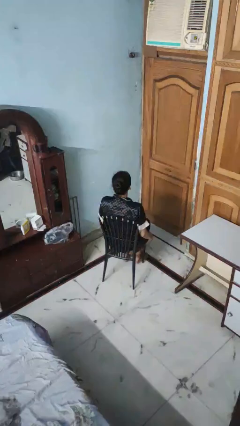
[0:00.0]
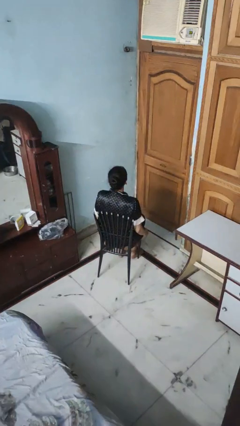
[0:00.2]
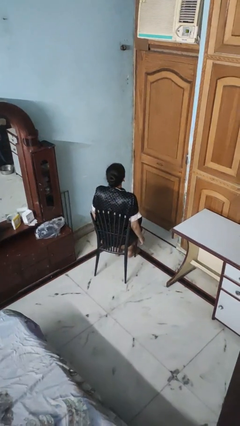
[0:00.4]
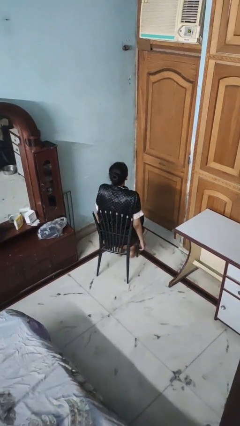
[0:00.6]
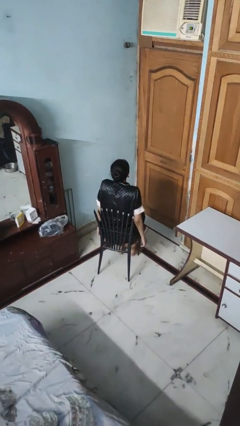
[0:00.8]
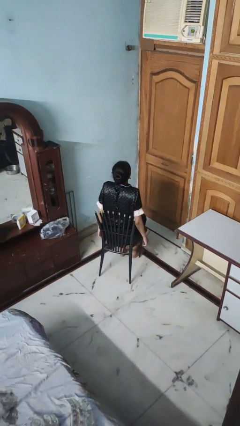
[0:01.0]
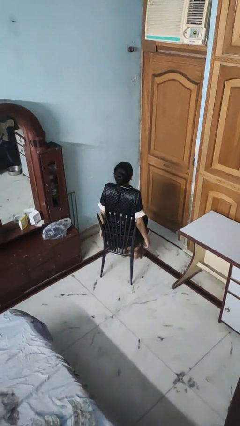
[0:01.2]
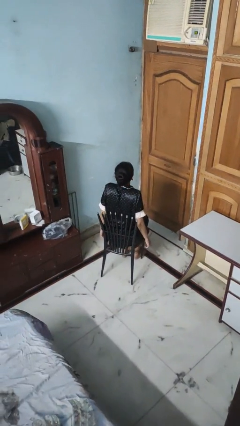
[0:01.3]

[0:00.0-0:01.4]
person shrugs

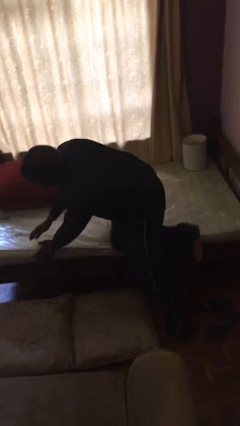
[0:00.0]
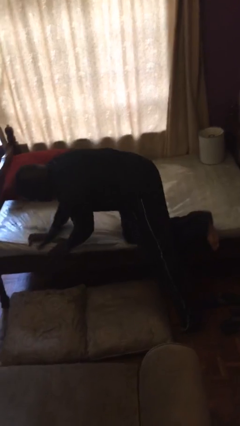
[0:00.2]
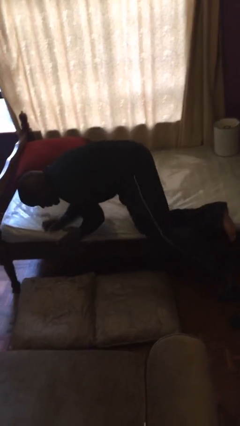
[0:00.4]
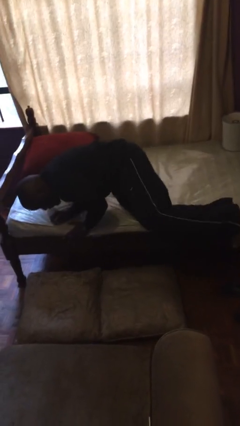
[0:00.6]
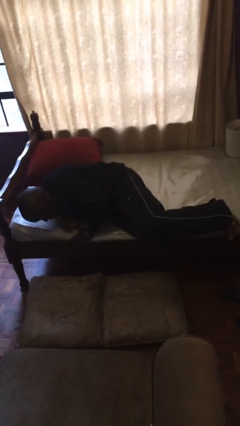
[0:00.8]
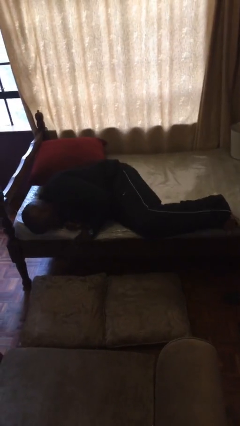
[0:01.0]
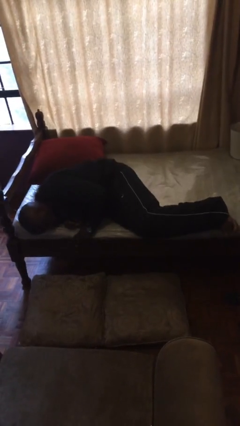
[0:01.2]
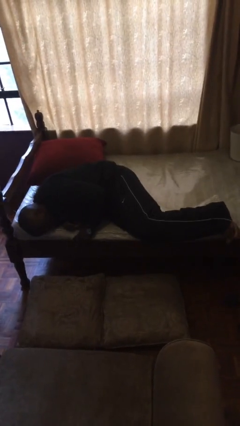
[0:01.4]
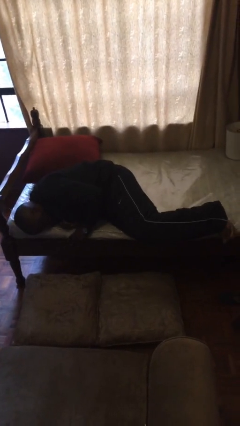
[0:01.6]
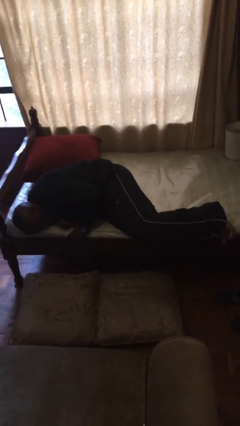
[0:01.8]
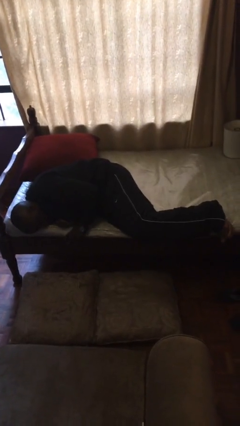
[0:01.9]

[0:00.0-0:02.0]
person lies down on bed

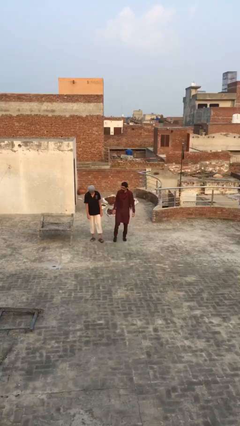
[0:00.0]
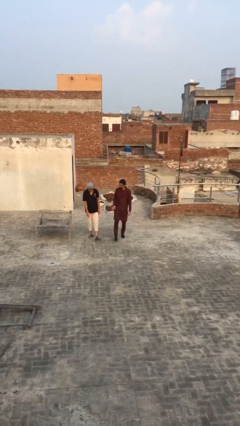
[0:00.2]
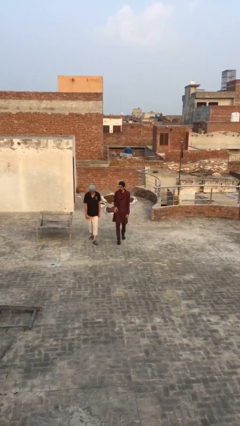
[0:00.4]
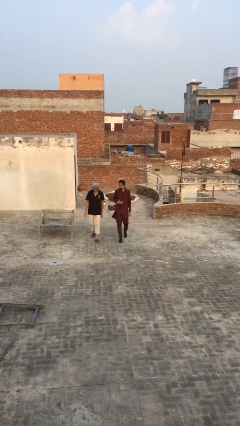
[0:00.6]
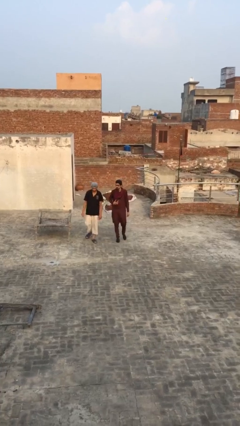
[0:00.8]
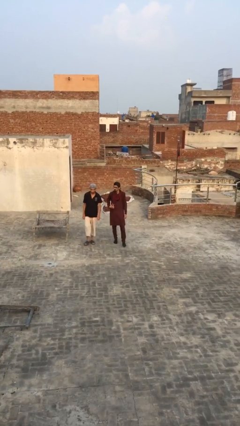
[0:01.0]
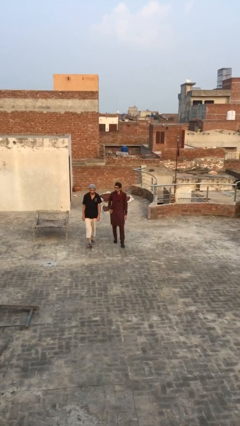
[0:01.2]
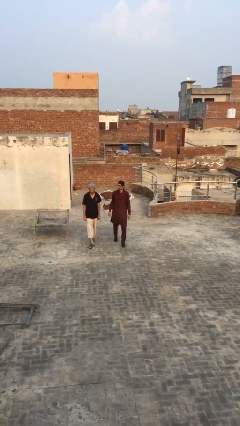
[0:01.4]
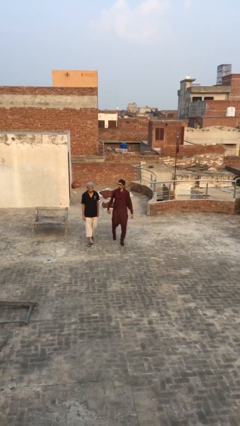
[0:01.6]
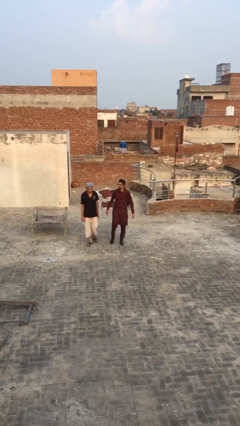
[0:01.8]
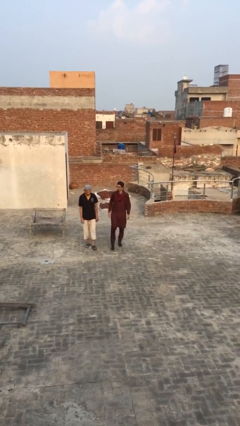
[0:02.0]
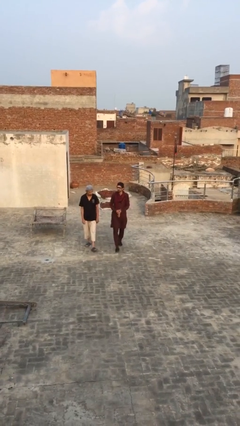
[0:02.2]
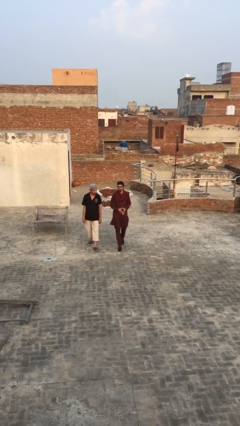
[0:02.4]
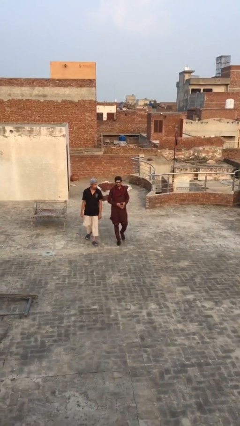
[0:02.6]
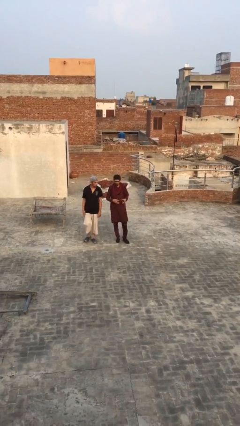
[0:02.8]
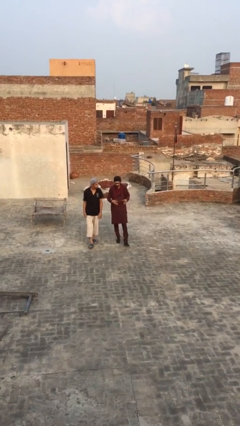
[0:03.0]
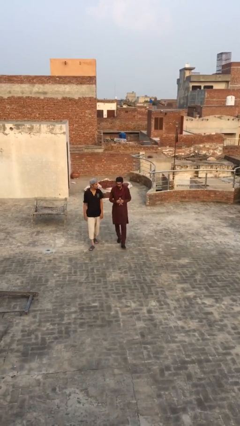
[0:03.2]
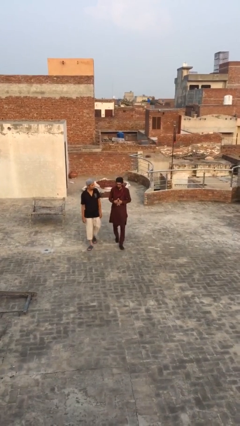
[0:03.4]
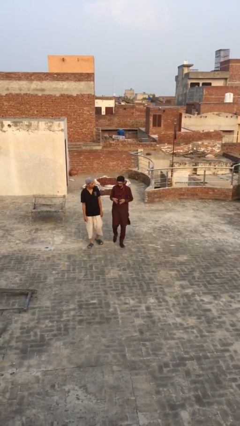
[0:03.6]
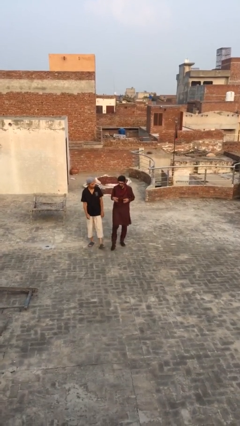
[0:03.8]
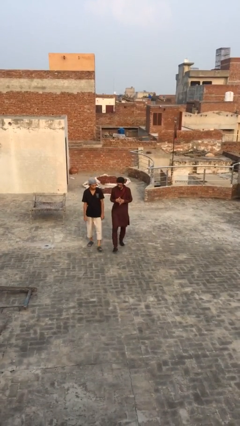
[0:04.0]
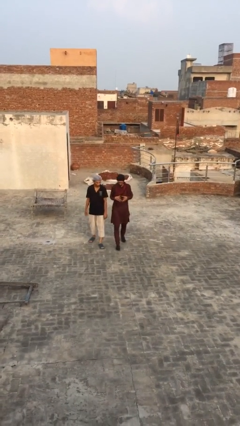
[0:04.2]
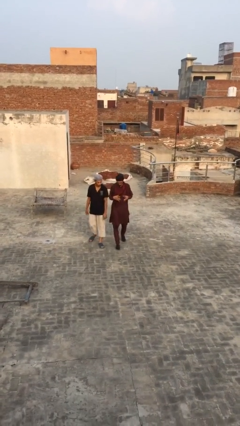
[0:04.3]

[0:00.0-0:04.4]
person talks to person

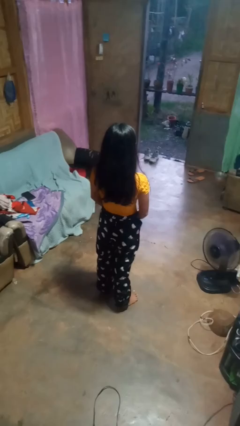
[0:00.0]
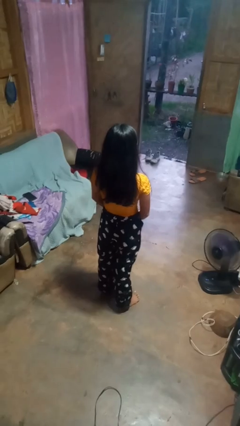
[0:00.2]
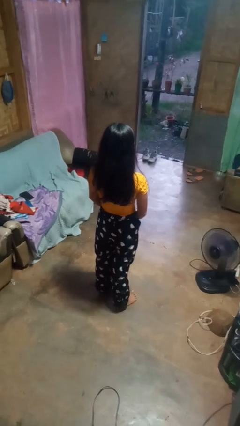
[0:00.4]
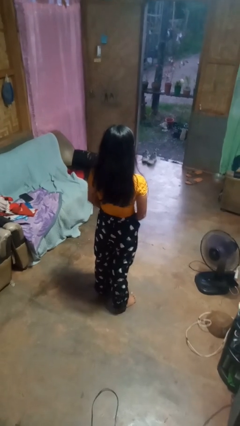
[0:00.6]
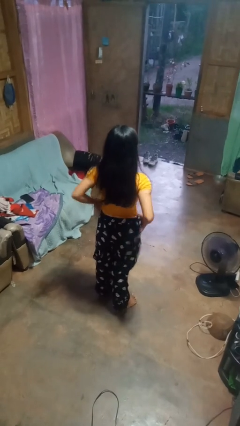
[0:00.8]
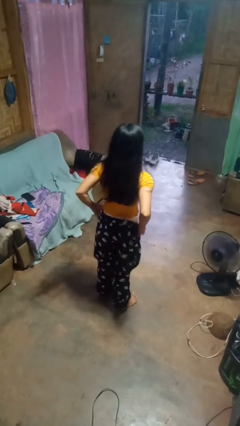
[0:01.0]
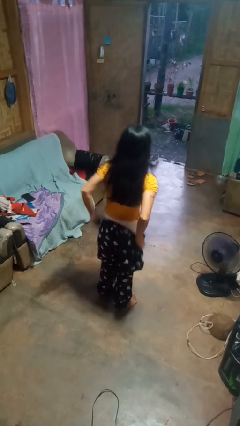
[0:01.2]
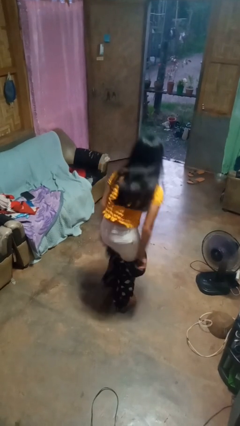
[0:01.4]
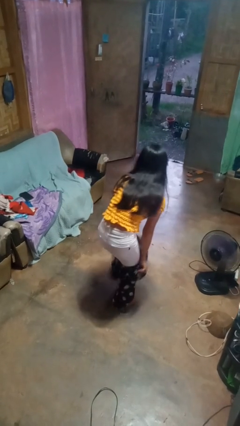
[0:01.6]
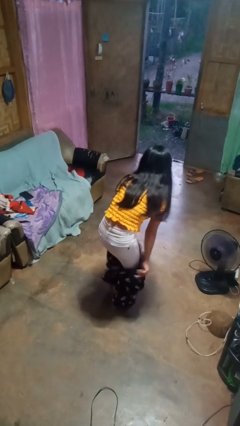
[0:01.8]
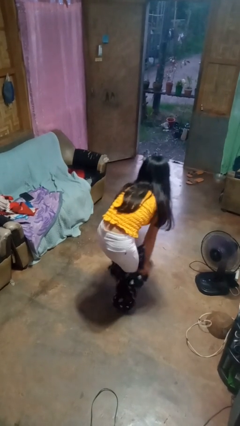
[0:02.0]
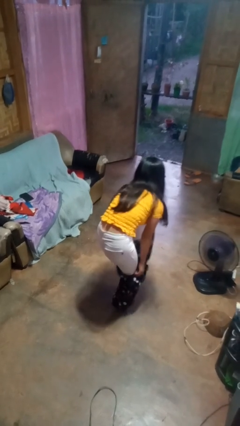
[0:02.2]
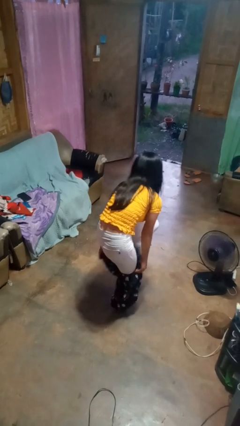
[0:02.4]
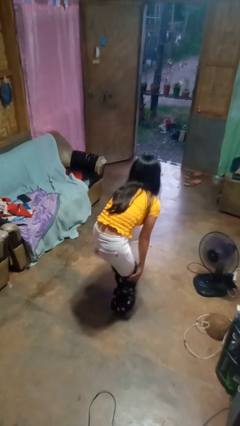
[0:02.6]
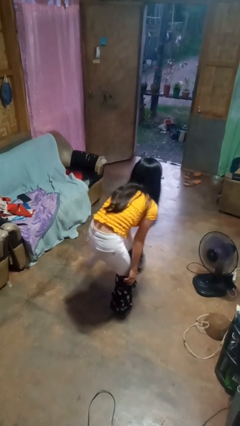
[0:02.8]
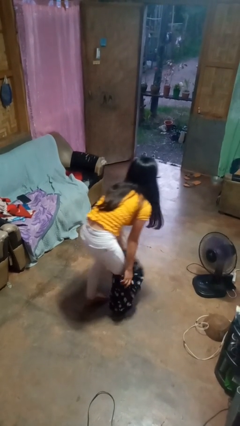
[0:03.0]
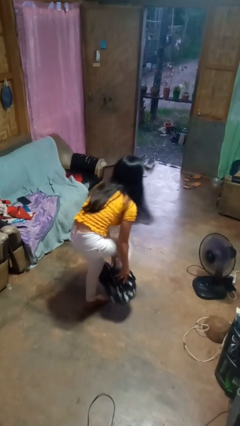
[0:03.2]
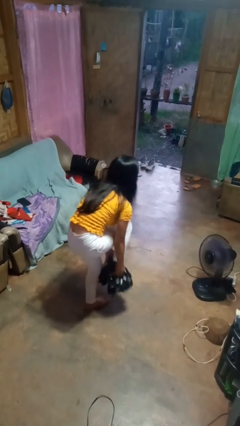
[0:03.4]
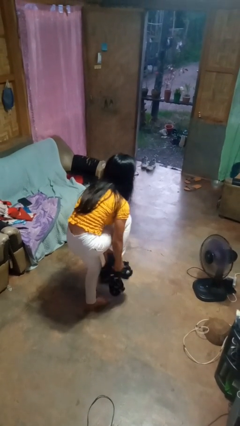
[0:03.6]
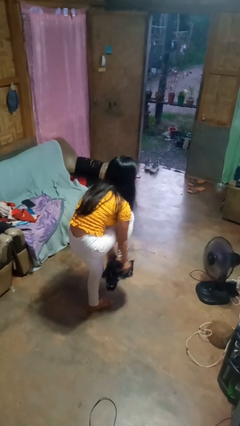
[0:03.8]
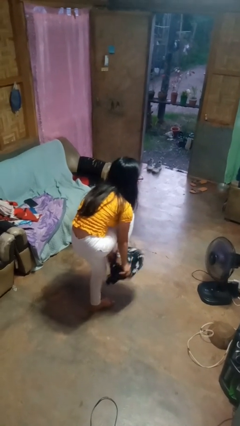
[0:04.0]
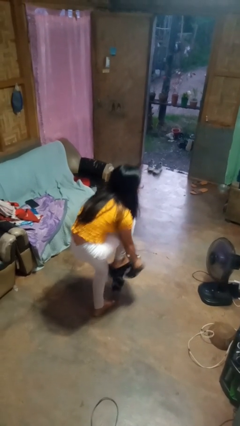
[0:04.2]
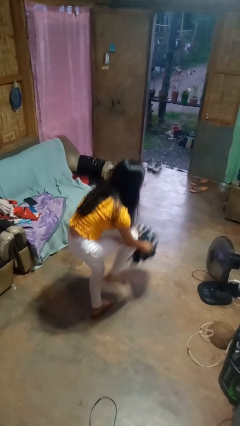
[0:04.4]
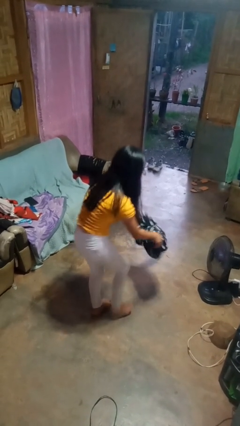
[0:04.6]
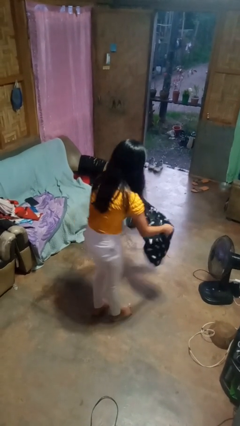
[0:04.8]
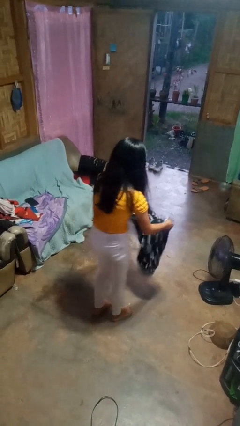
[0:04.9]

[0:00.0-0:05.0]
person takes off pants

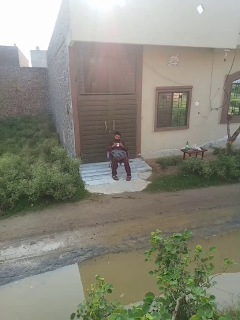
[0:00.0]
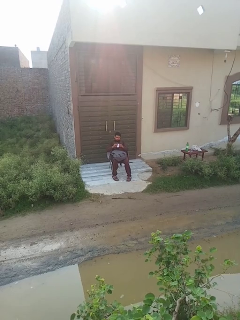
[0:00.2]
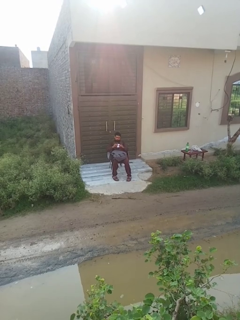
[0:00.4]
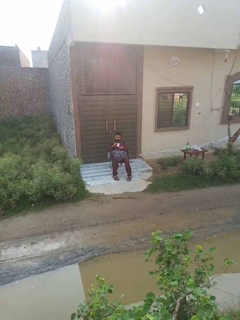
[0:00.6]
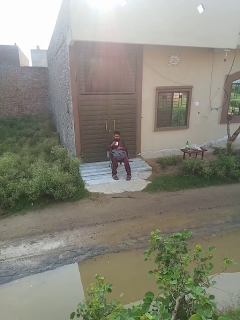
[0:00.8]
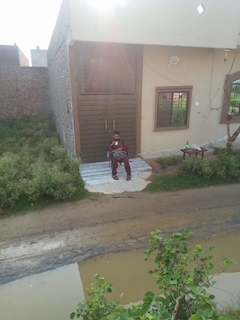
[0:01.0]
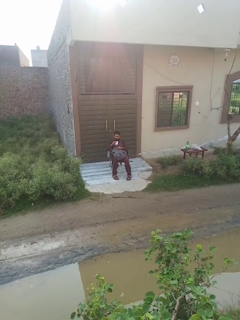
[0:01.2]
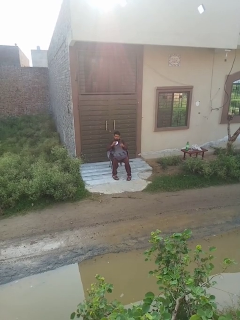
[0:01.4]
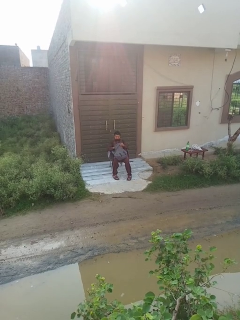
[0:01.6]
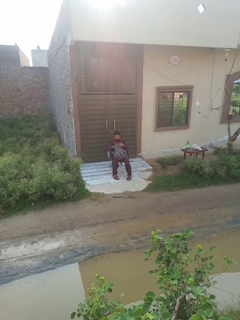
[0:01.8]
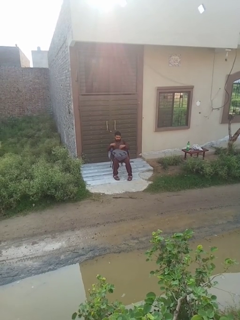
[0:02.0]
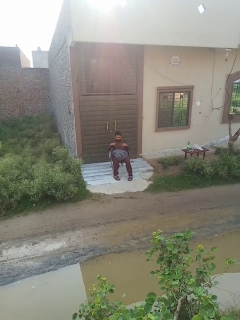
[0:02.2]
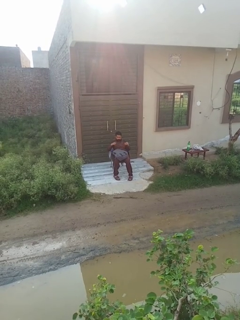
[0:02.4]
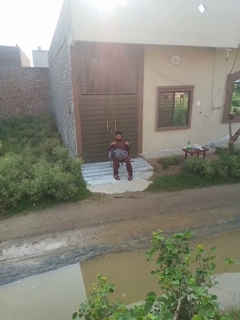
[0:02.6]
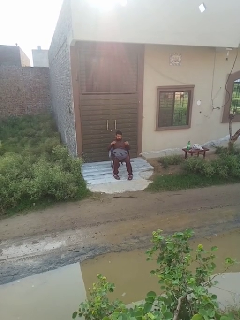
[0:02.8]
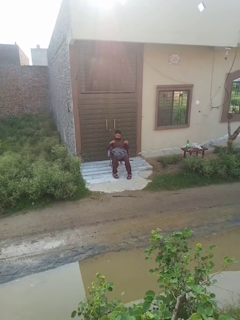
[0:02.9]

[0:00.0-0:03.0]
person puts object into backpack

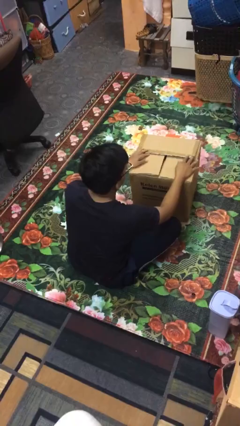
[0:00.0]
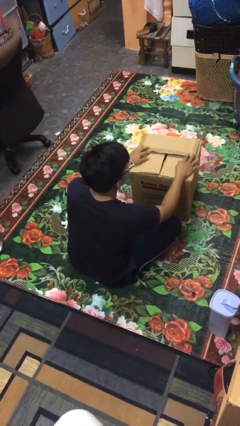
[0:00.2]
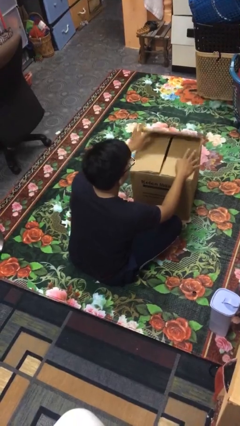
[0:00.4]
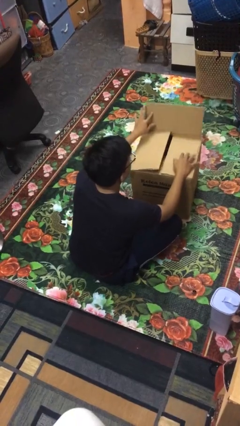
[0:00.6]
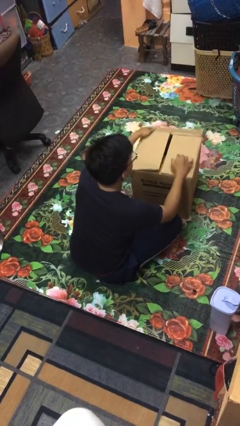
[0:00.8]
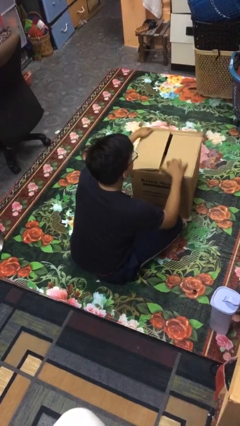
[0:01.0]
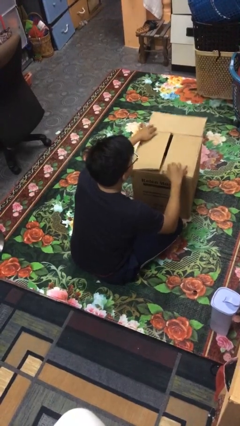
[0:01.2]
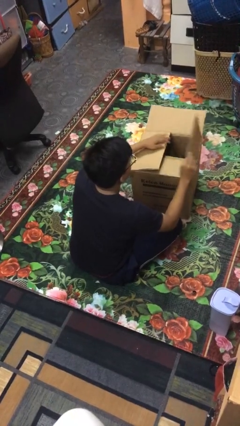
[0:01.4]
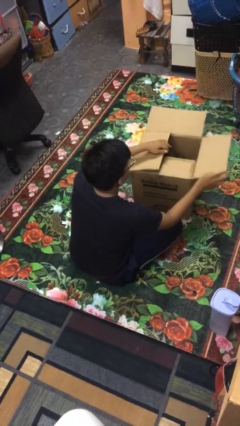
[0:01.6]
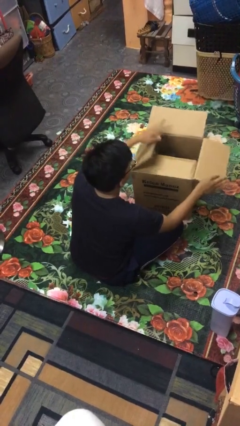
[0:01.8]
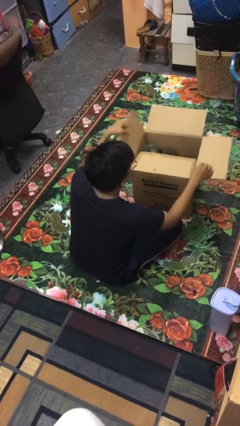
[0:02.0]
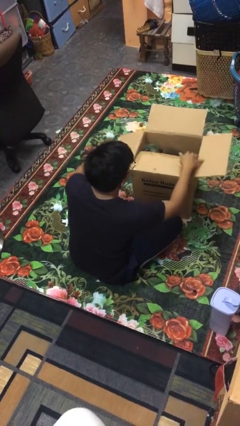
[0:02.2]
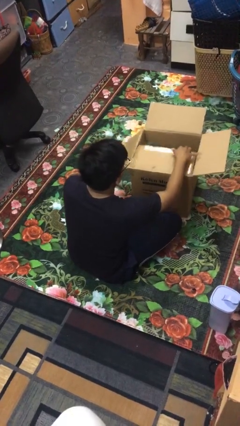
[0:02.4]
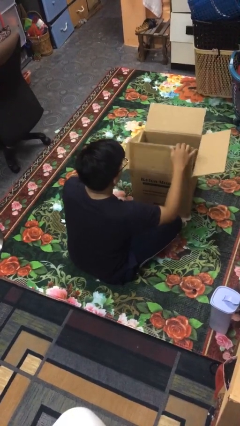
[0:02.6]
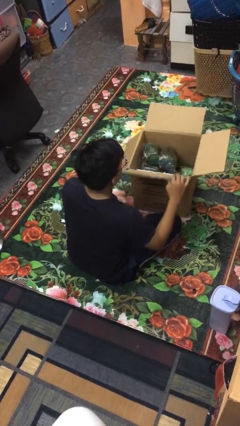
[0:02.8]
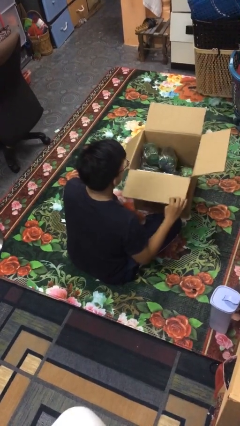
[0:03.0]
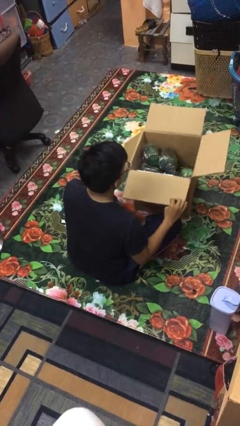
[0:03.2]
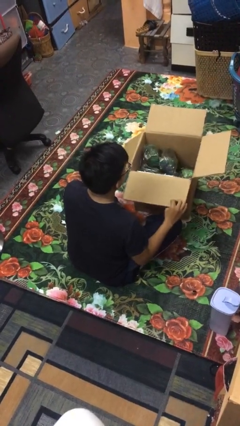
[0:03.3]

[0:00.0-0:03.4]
person opens box